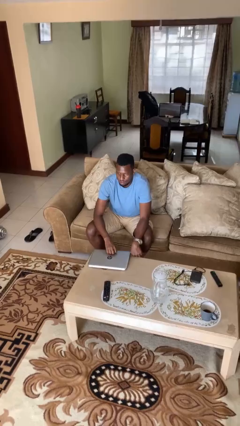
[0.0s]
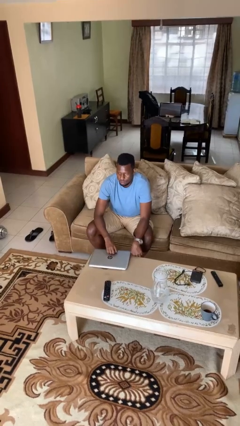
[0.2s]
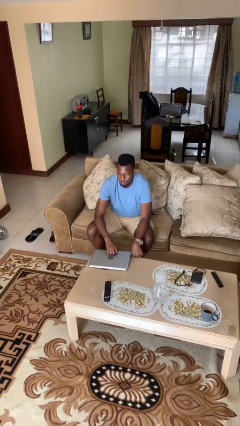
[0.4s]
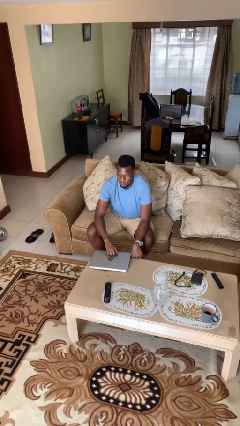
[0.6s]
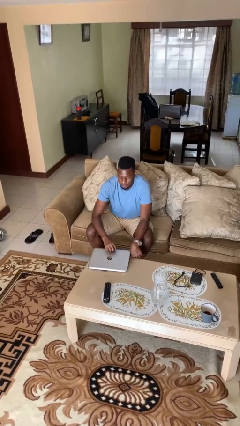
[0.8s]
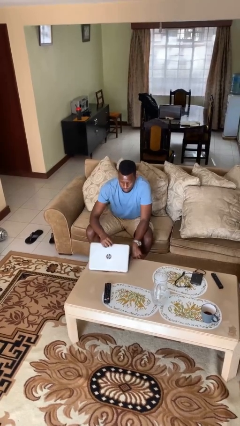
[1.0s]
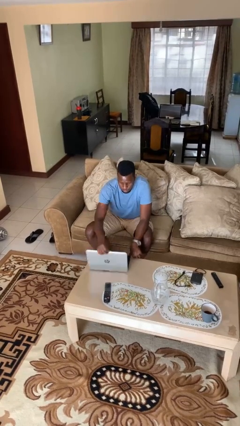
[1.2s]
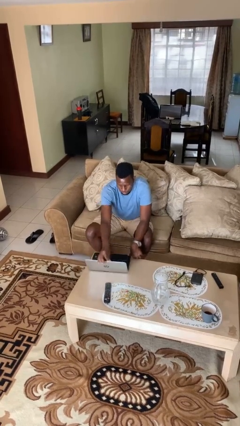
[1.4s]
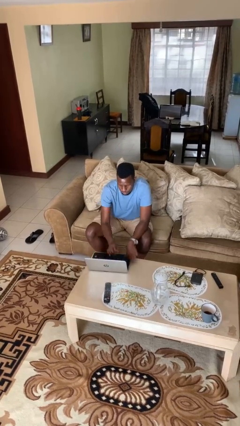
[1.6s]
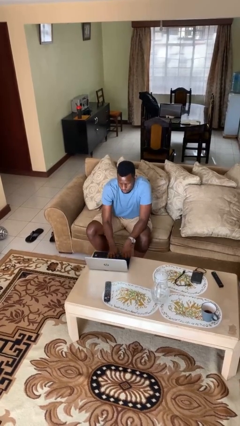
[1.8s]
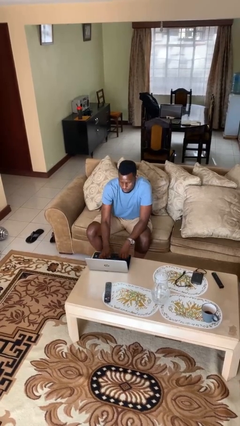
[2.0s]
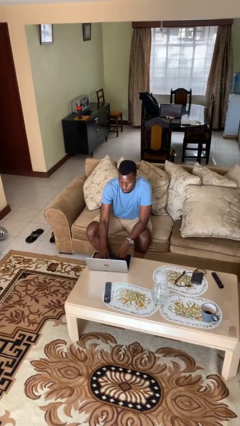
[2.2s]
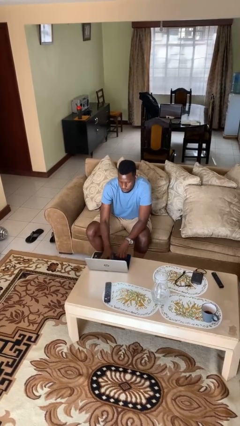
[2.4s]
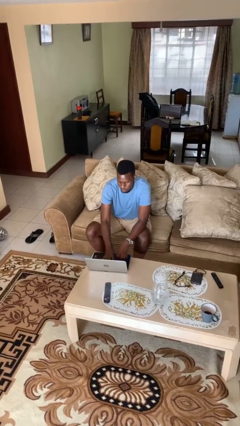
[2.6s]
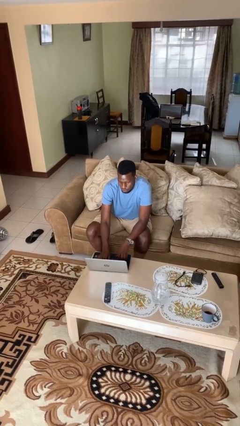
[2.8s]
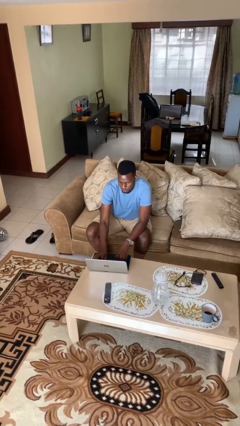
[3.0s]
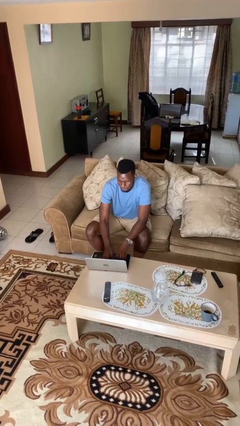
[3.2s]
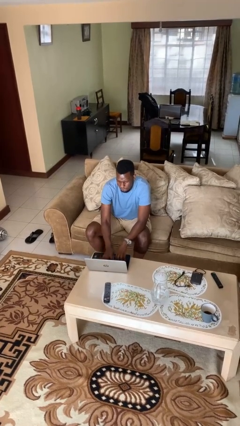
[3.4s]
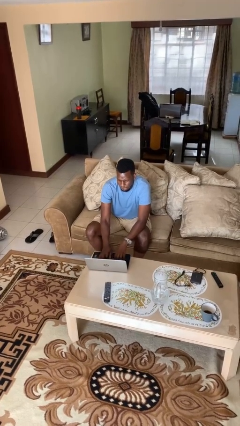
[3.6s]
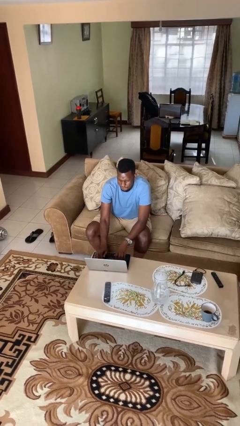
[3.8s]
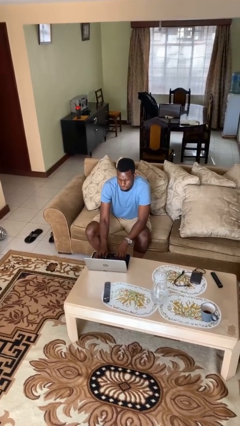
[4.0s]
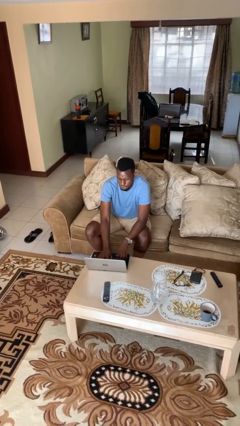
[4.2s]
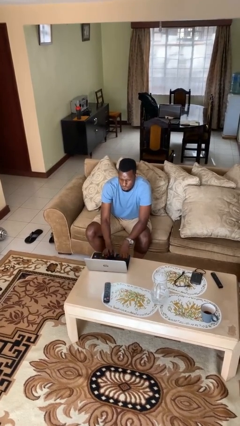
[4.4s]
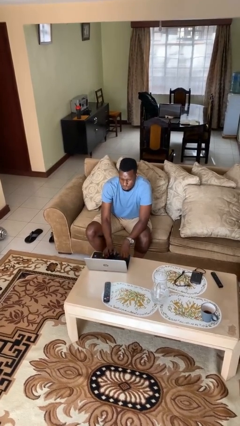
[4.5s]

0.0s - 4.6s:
person interacts with laptop

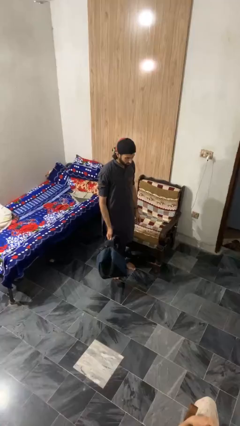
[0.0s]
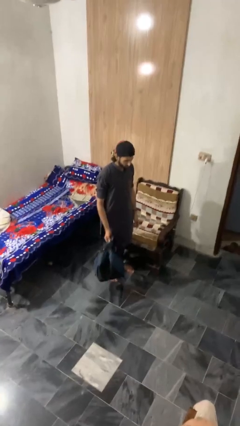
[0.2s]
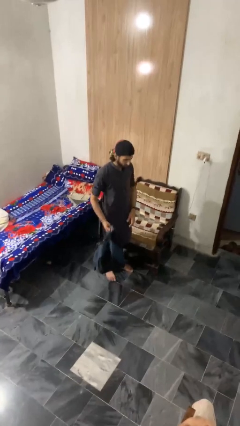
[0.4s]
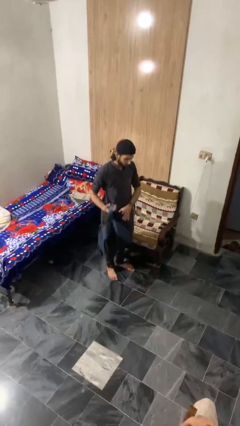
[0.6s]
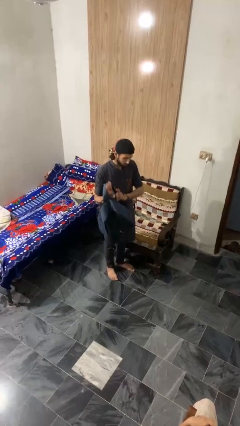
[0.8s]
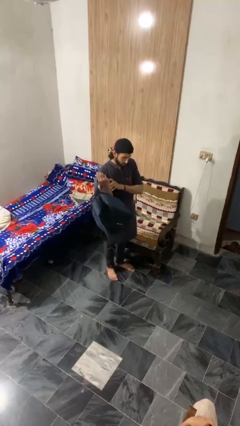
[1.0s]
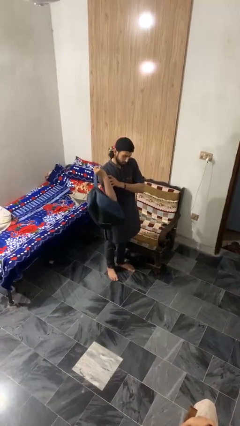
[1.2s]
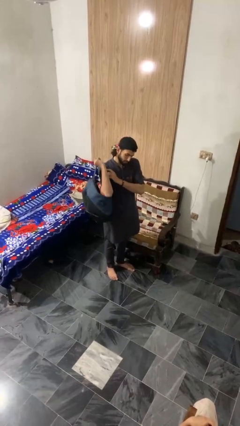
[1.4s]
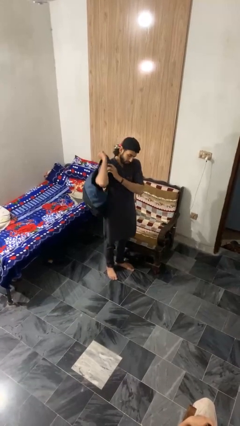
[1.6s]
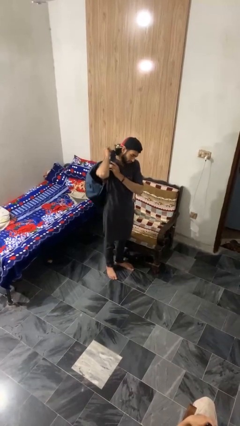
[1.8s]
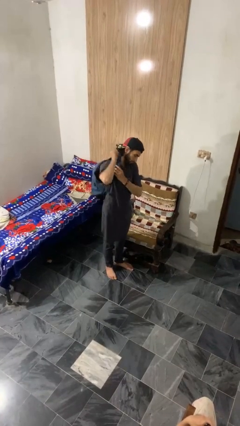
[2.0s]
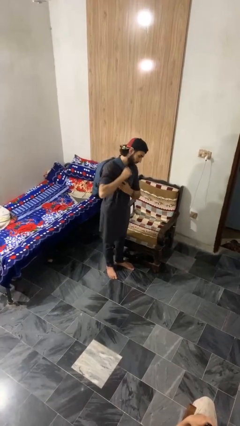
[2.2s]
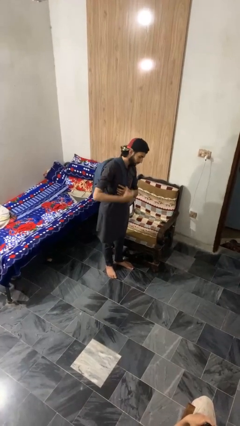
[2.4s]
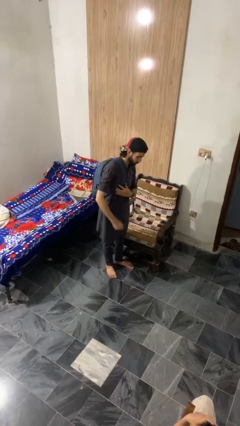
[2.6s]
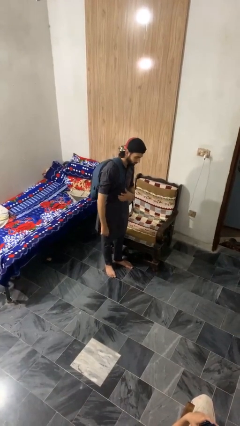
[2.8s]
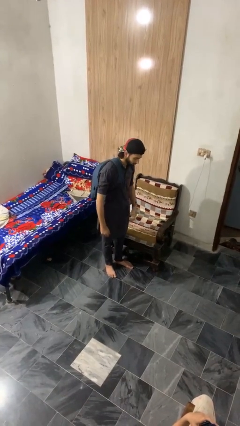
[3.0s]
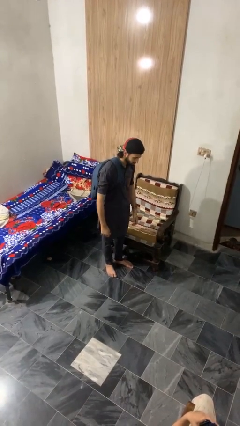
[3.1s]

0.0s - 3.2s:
person puts on backpack

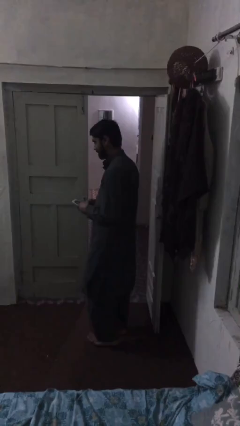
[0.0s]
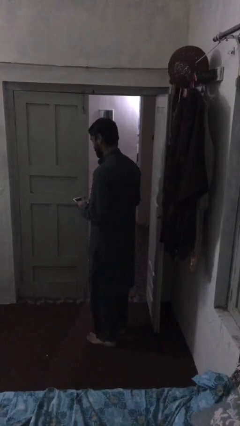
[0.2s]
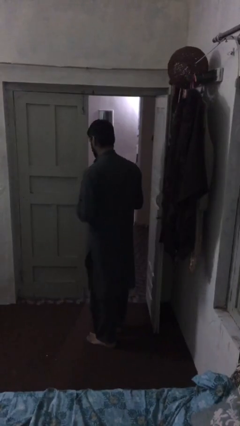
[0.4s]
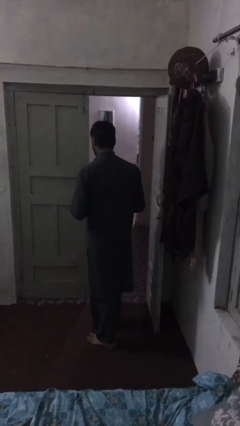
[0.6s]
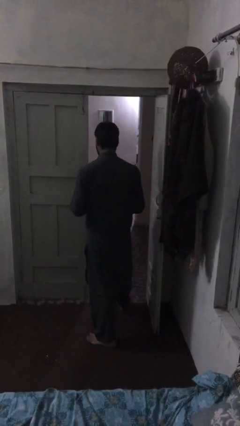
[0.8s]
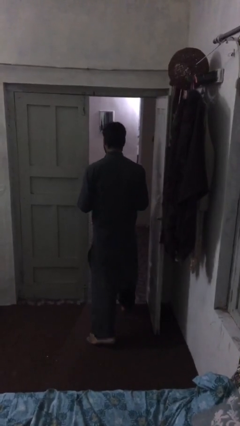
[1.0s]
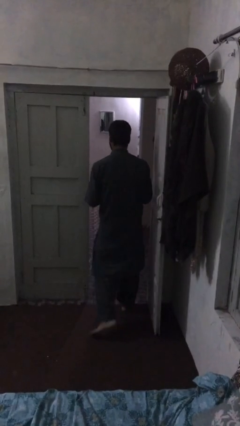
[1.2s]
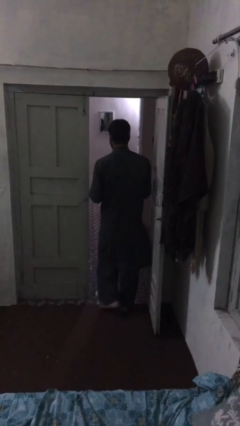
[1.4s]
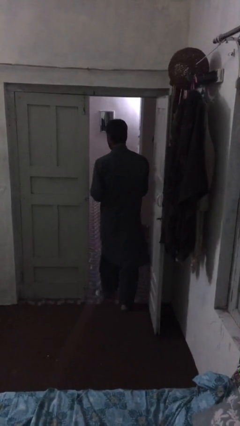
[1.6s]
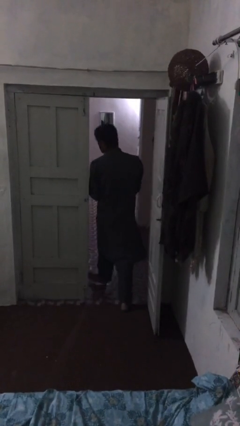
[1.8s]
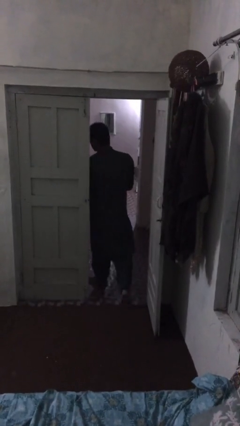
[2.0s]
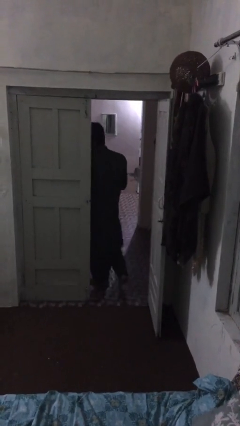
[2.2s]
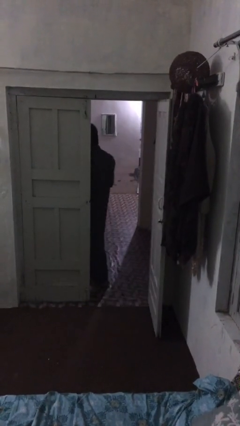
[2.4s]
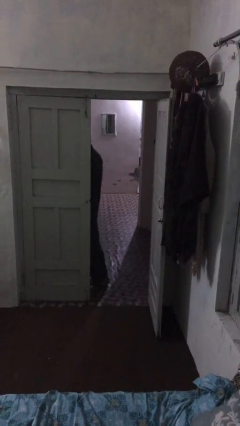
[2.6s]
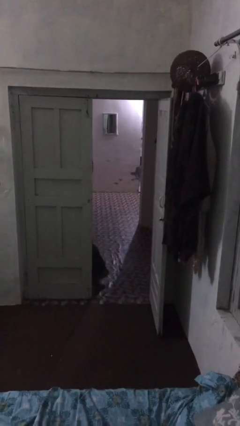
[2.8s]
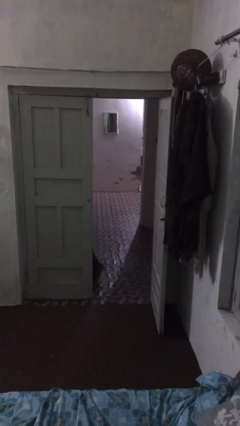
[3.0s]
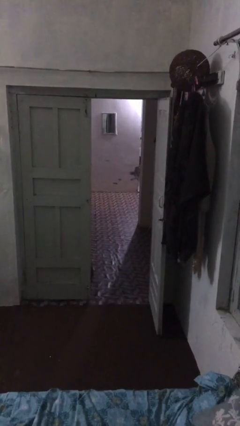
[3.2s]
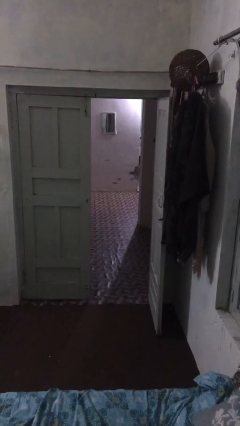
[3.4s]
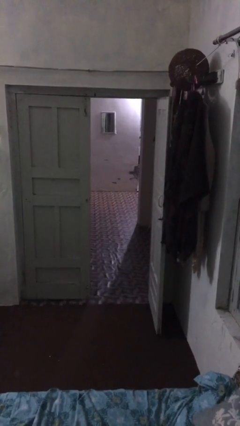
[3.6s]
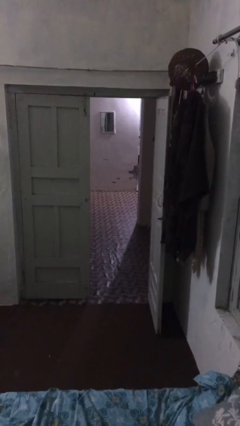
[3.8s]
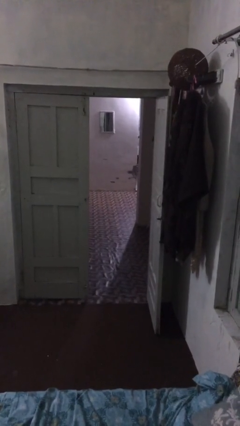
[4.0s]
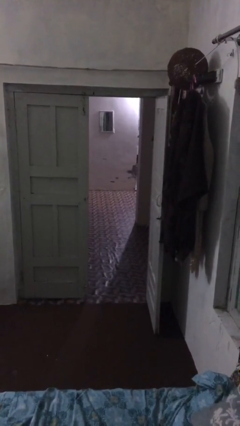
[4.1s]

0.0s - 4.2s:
person exits scene through structure

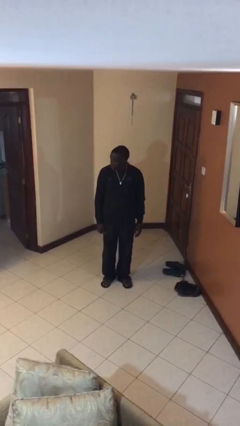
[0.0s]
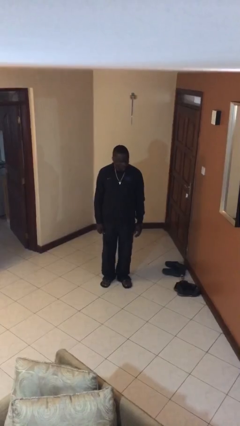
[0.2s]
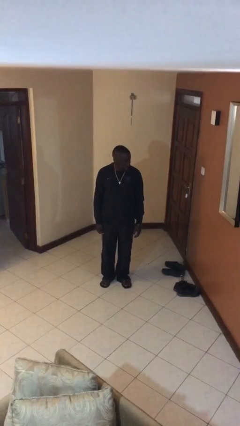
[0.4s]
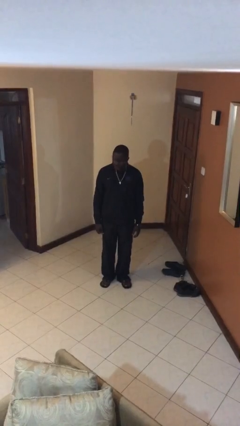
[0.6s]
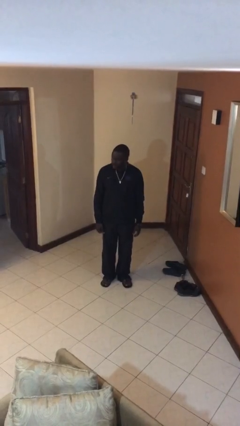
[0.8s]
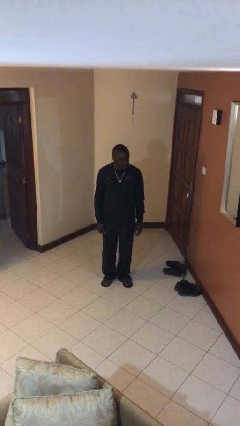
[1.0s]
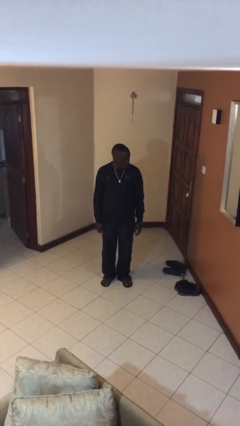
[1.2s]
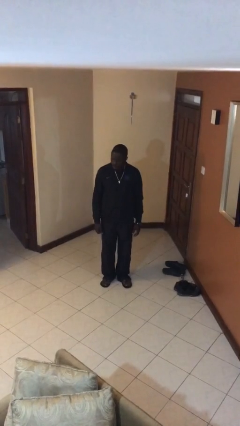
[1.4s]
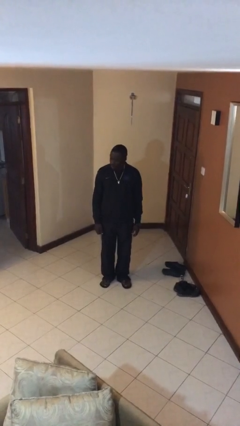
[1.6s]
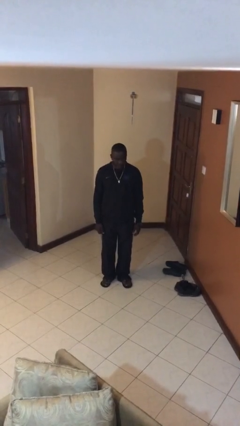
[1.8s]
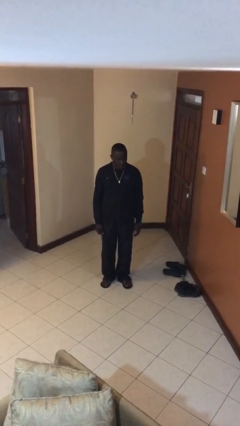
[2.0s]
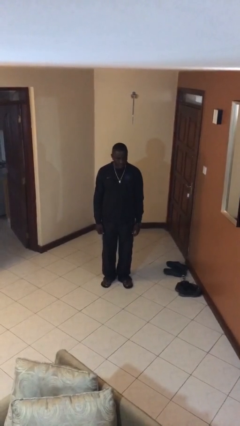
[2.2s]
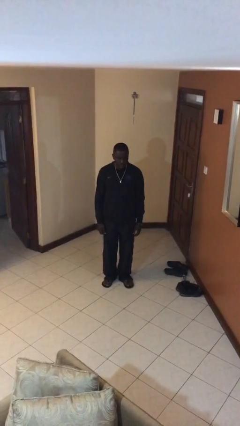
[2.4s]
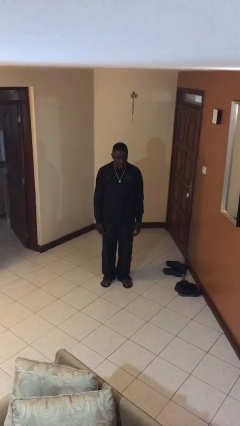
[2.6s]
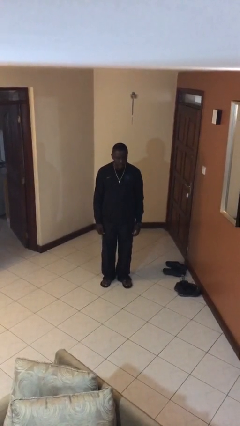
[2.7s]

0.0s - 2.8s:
person shakes head

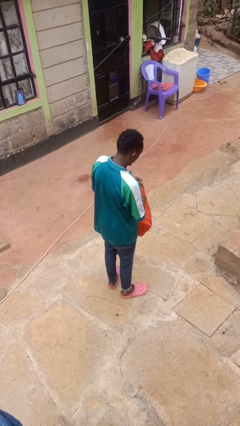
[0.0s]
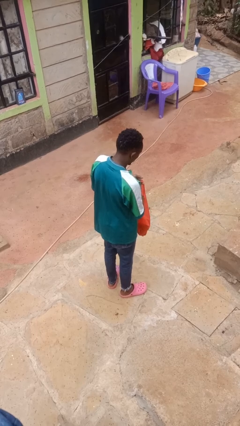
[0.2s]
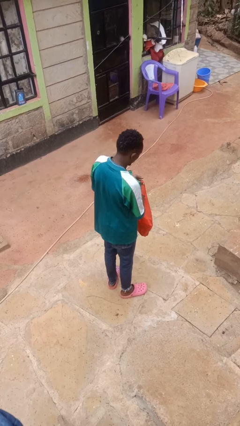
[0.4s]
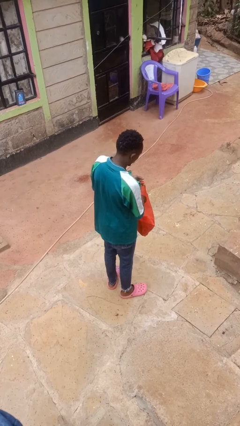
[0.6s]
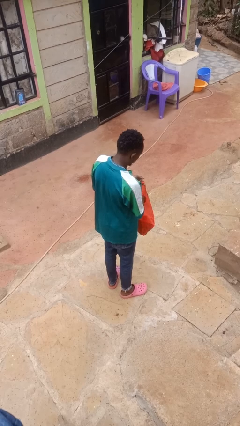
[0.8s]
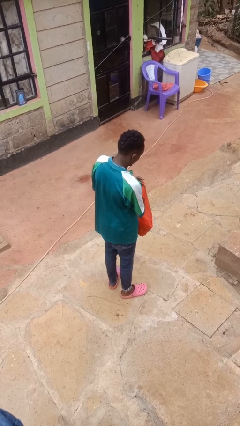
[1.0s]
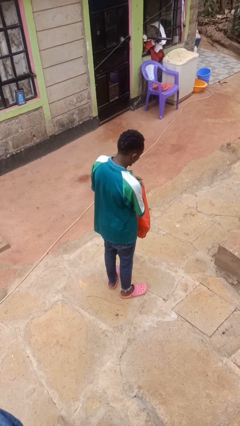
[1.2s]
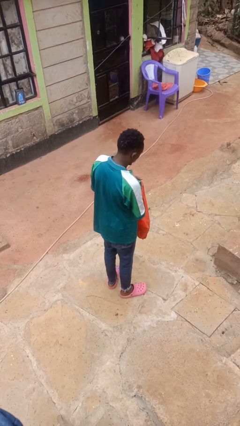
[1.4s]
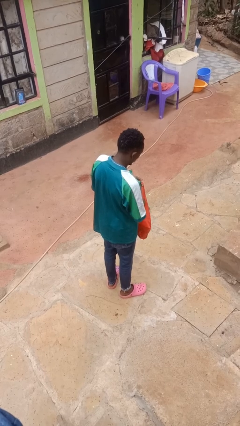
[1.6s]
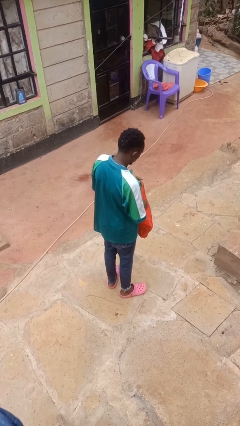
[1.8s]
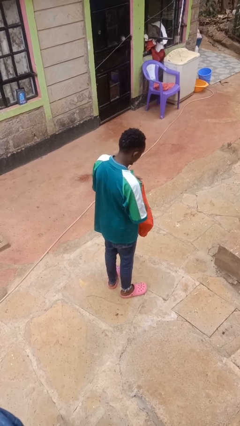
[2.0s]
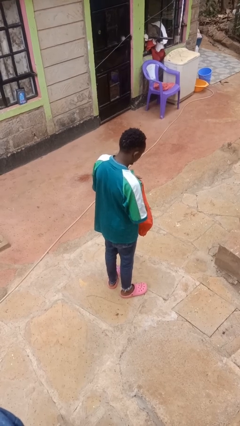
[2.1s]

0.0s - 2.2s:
person puts object into bag

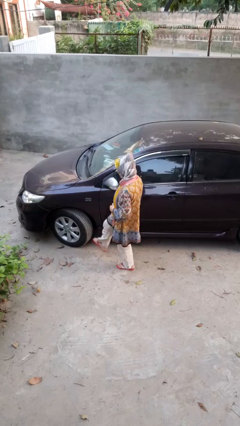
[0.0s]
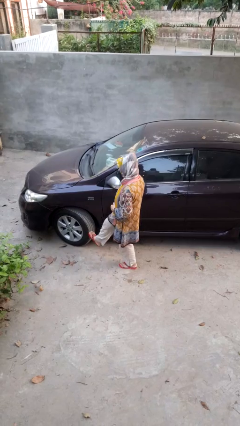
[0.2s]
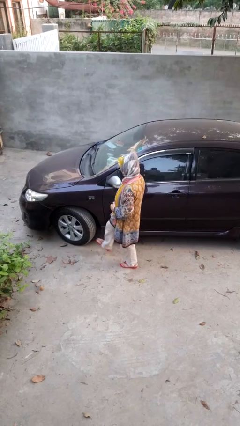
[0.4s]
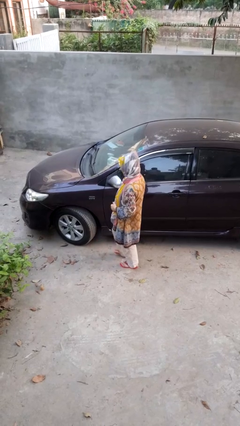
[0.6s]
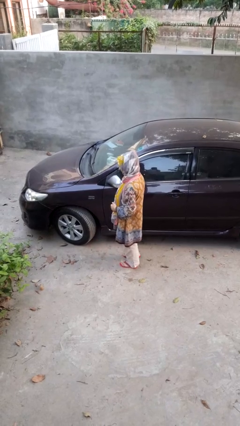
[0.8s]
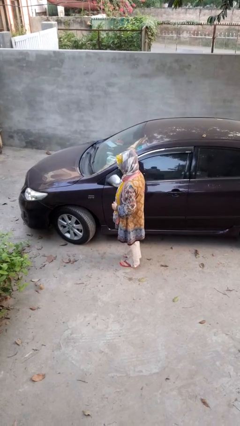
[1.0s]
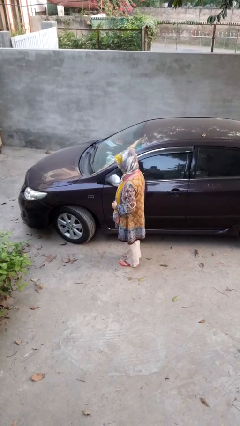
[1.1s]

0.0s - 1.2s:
person kicks car tires
